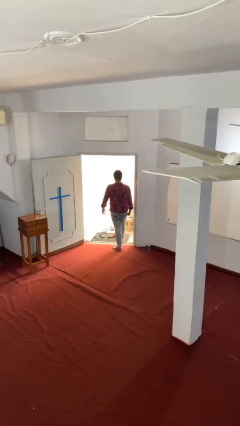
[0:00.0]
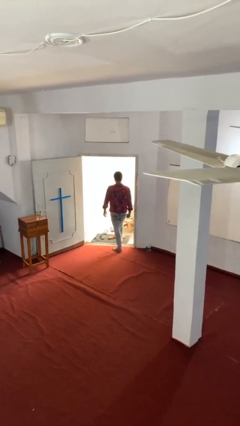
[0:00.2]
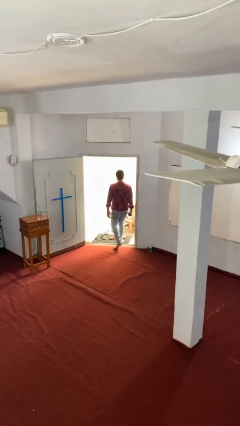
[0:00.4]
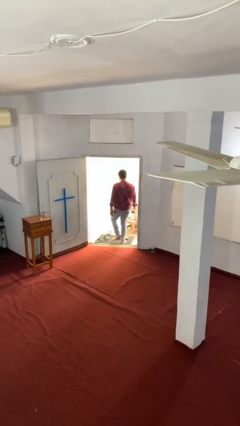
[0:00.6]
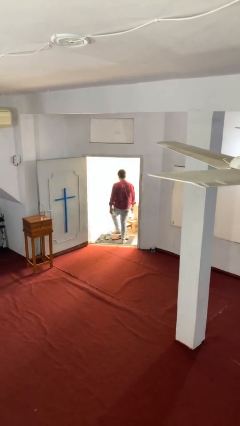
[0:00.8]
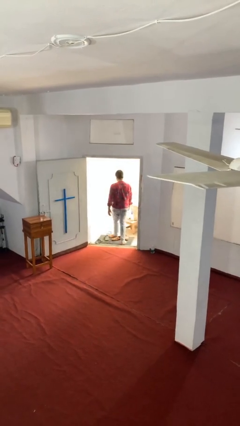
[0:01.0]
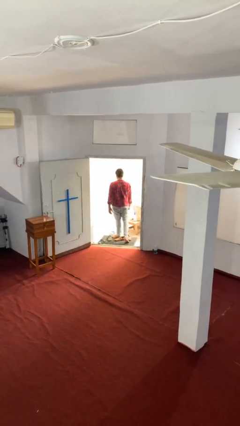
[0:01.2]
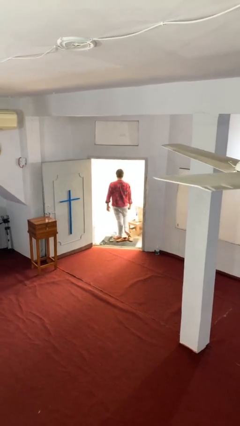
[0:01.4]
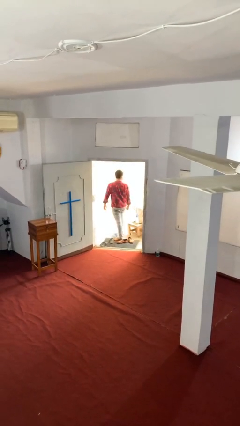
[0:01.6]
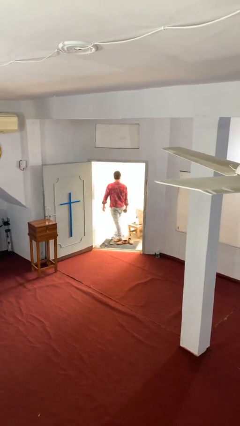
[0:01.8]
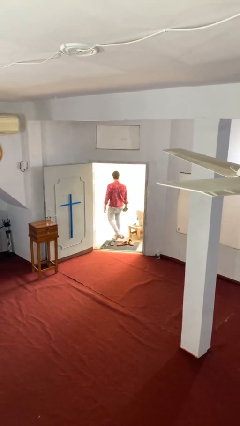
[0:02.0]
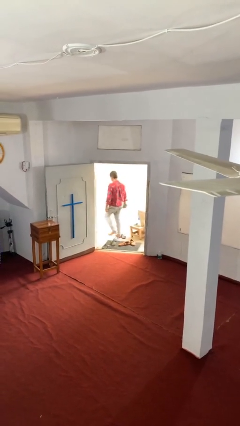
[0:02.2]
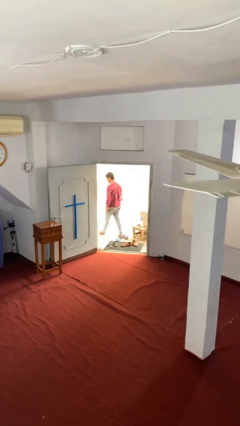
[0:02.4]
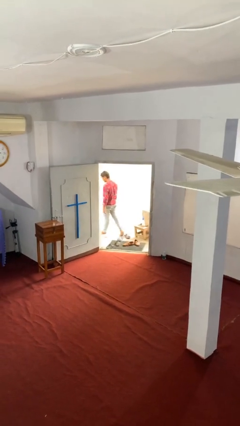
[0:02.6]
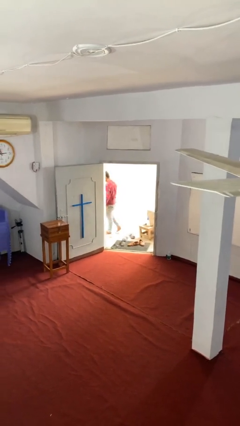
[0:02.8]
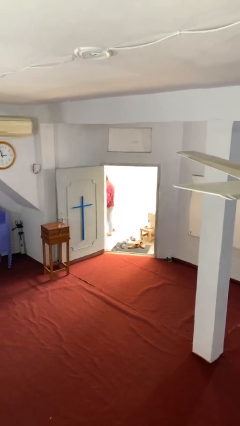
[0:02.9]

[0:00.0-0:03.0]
person exits scene through structure

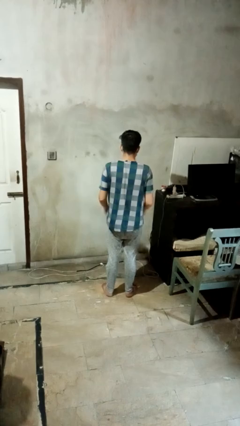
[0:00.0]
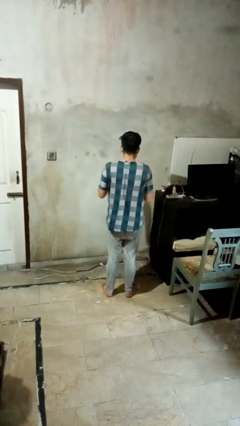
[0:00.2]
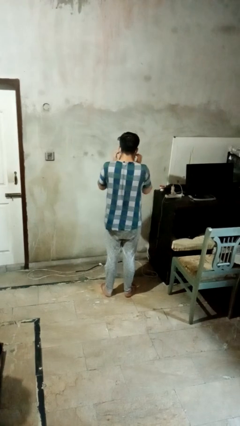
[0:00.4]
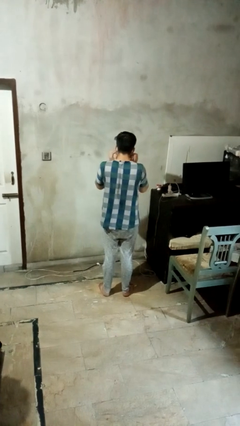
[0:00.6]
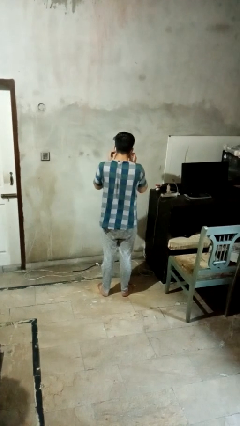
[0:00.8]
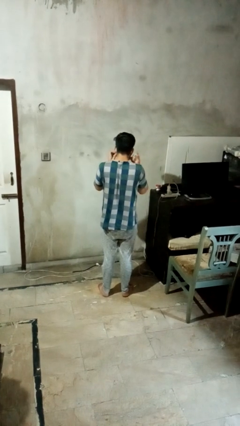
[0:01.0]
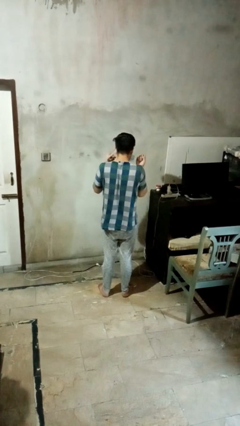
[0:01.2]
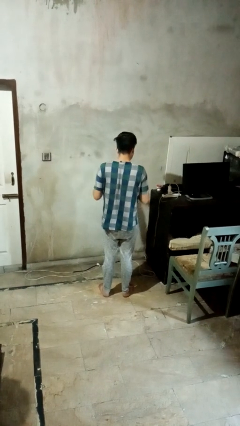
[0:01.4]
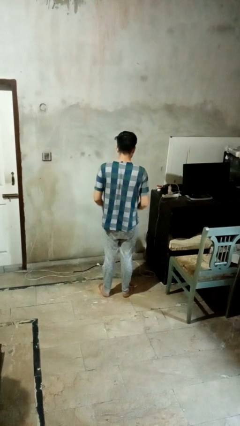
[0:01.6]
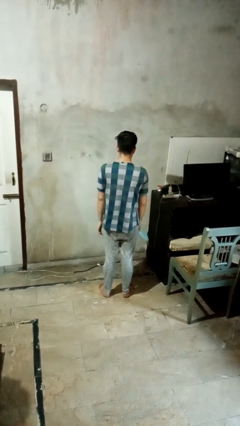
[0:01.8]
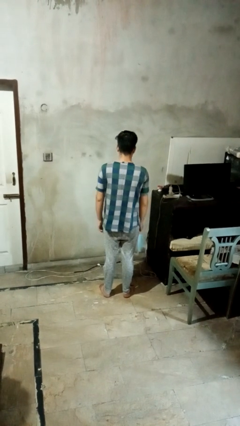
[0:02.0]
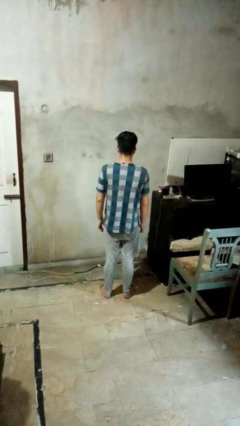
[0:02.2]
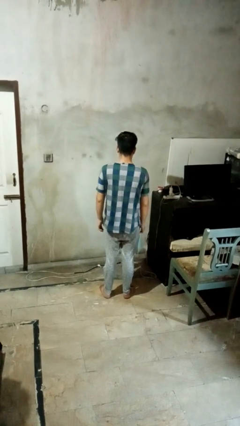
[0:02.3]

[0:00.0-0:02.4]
person takes off facemask

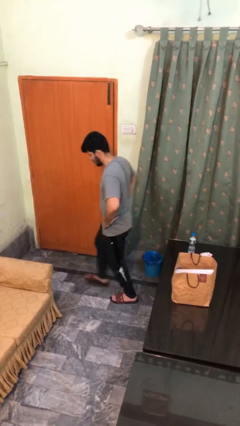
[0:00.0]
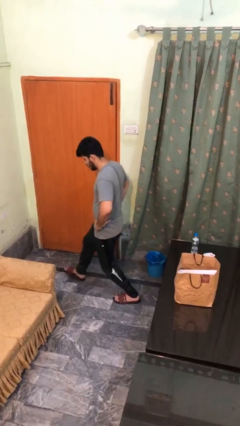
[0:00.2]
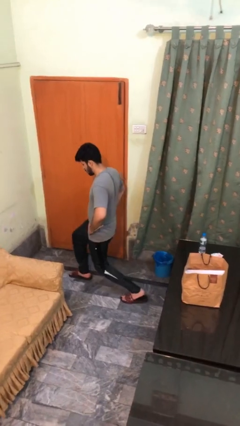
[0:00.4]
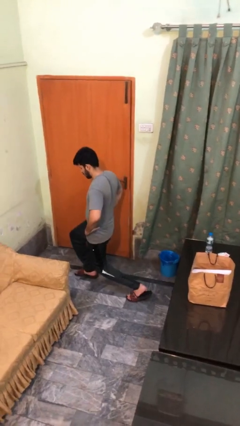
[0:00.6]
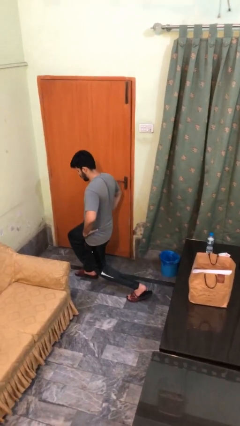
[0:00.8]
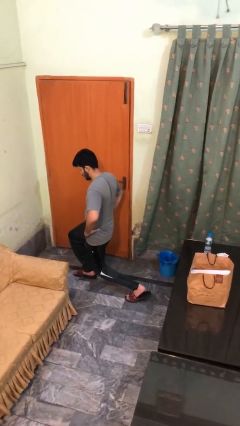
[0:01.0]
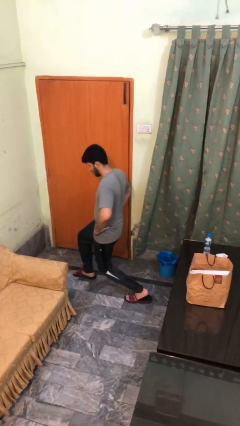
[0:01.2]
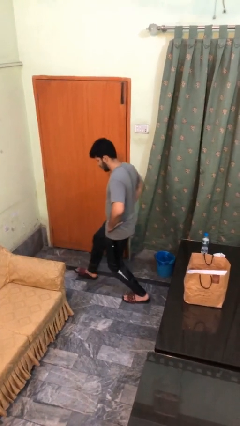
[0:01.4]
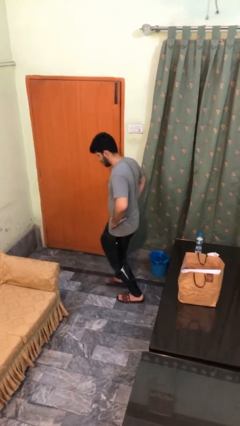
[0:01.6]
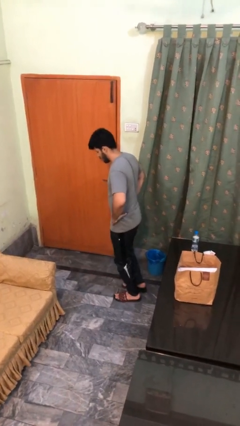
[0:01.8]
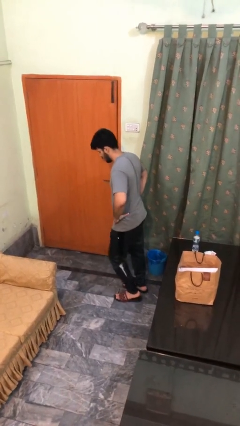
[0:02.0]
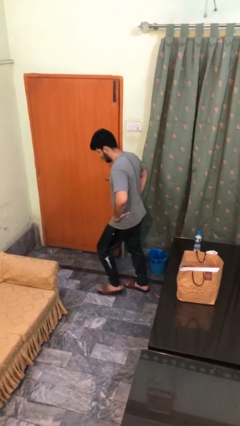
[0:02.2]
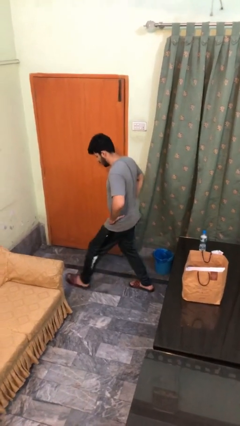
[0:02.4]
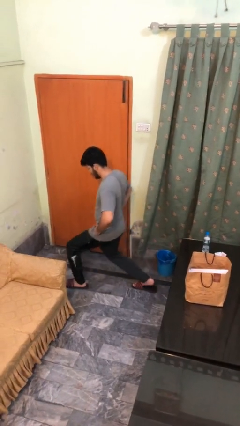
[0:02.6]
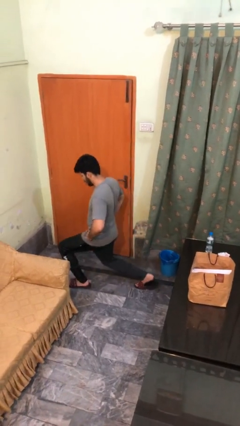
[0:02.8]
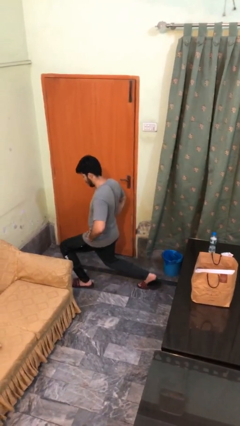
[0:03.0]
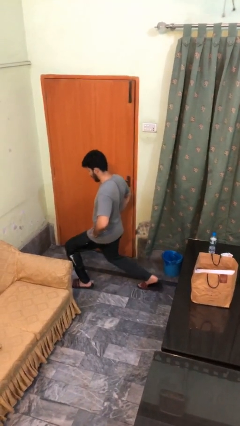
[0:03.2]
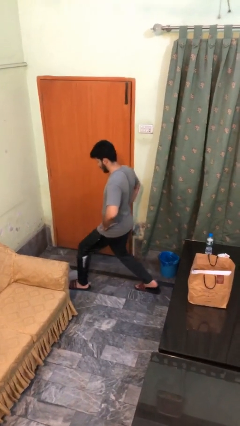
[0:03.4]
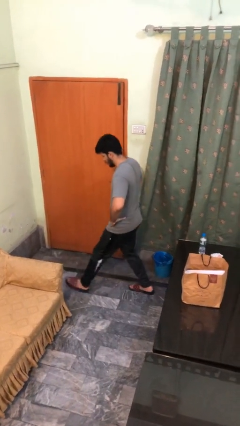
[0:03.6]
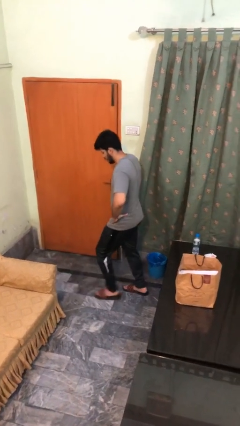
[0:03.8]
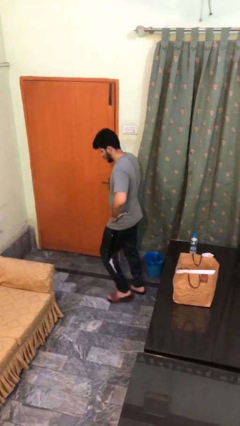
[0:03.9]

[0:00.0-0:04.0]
person exercises with lunges

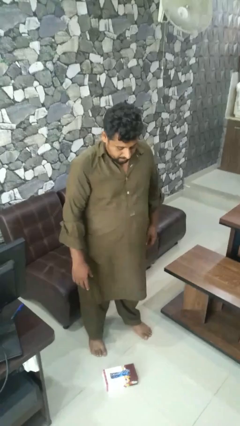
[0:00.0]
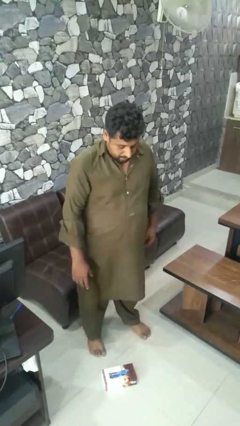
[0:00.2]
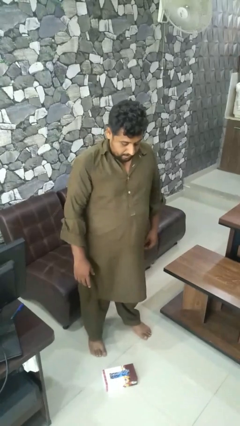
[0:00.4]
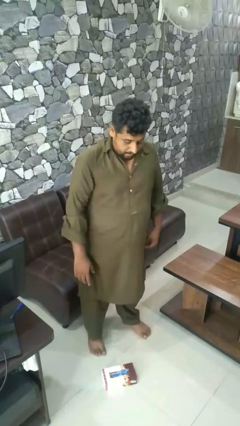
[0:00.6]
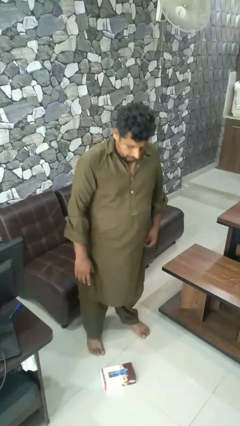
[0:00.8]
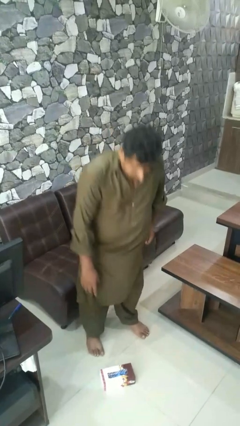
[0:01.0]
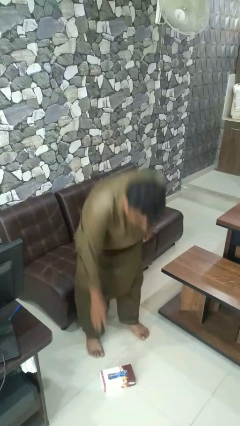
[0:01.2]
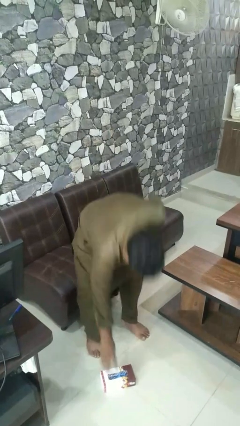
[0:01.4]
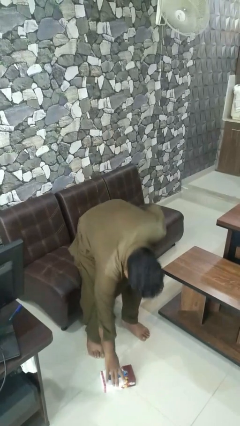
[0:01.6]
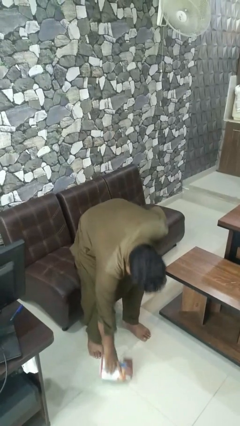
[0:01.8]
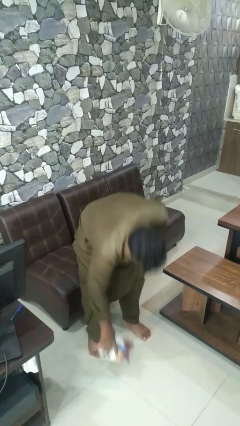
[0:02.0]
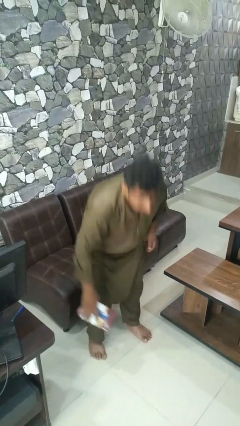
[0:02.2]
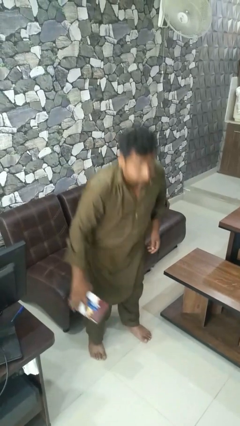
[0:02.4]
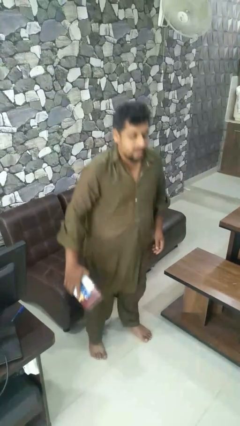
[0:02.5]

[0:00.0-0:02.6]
person picks up object from floor

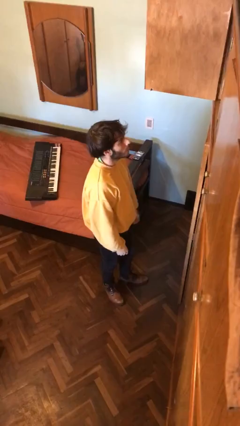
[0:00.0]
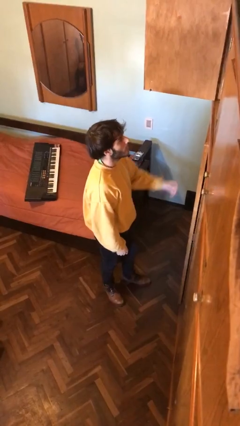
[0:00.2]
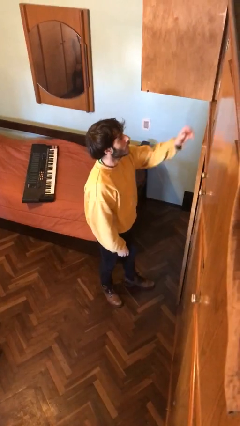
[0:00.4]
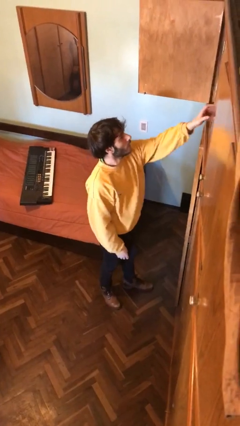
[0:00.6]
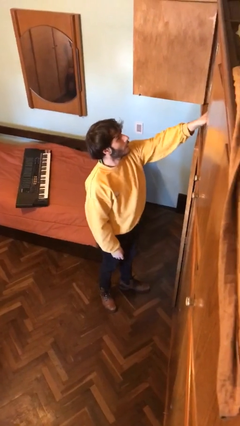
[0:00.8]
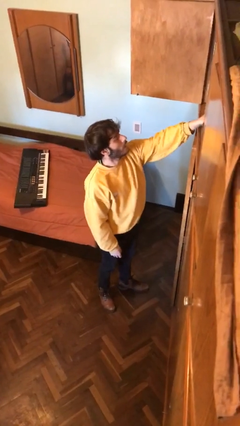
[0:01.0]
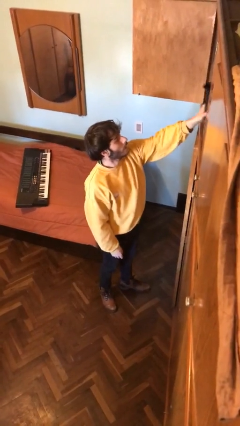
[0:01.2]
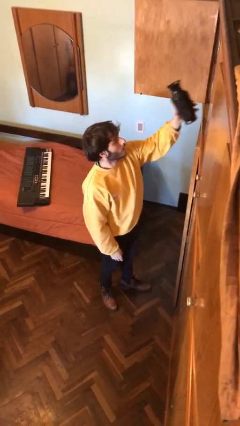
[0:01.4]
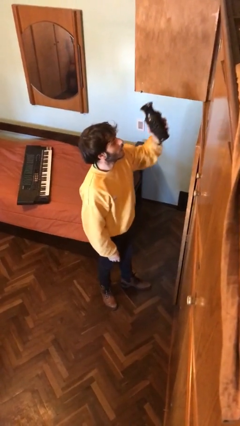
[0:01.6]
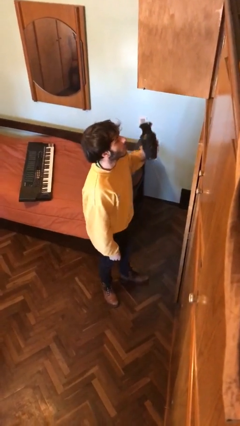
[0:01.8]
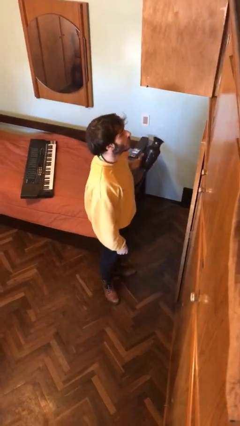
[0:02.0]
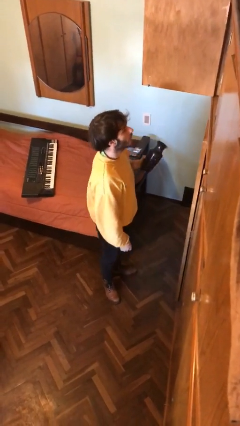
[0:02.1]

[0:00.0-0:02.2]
person picks up object from cabinet

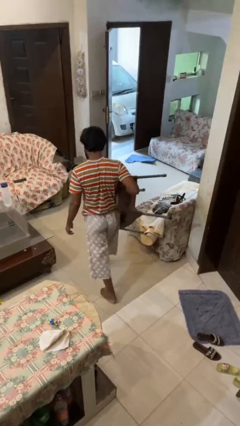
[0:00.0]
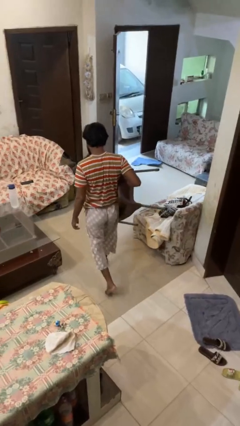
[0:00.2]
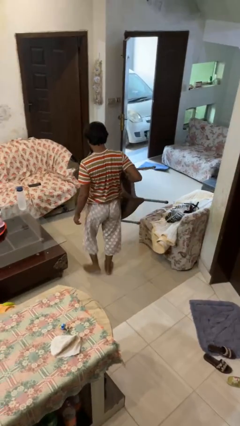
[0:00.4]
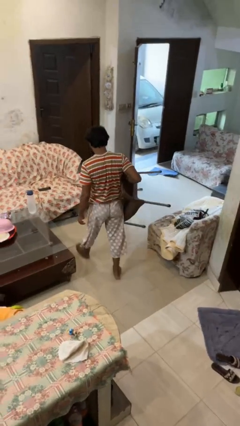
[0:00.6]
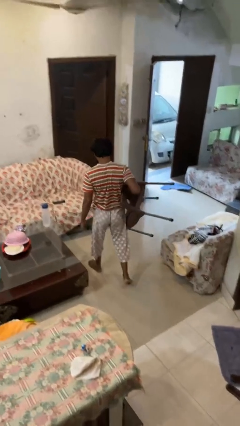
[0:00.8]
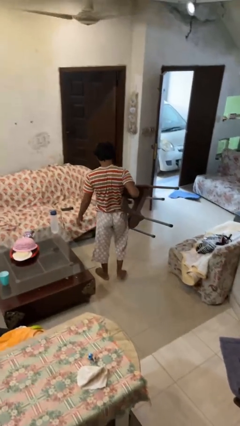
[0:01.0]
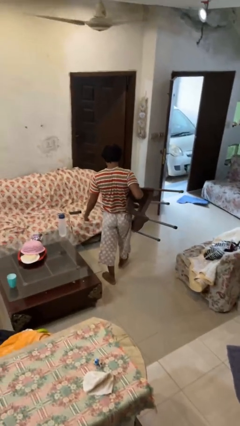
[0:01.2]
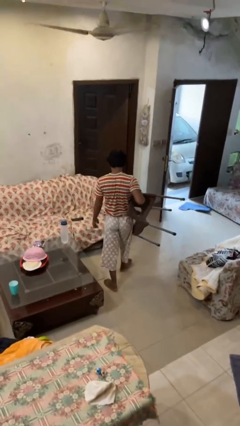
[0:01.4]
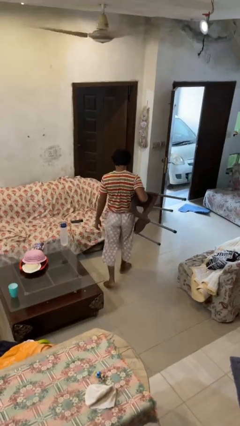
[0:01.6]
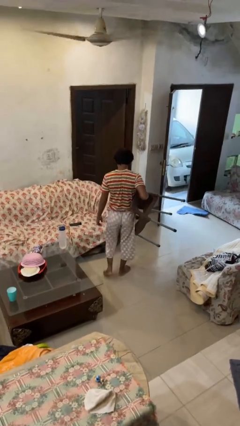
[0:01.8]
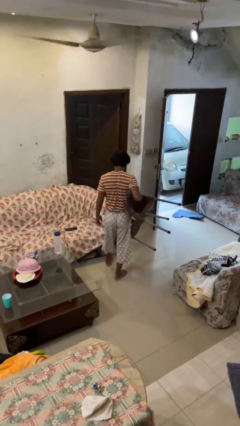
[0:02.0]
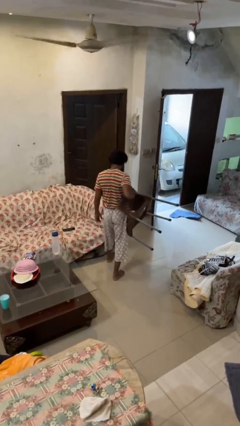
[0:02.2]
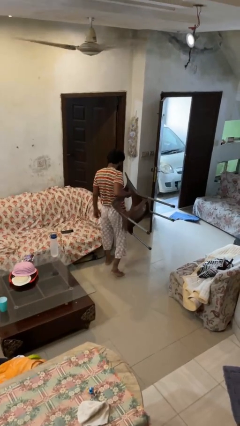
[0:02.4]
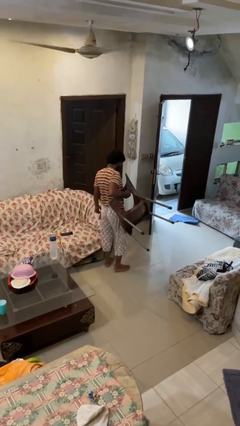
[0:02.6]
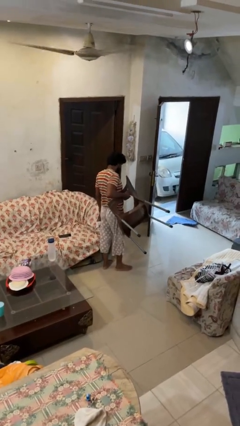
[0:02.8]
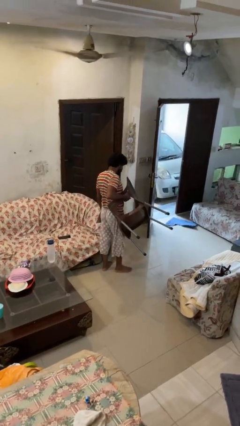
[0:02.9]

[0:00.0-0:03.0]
person carries furniture

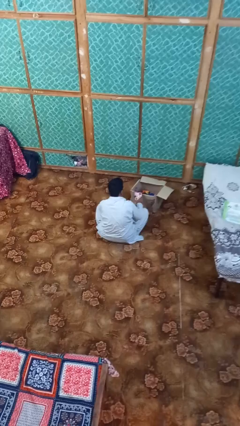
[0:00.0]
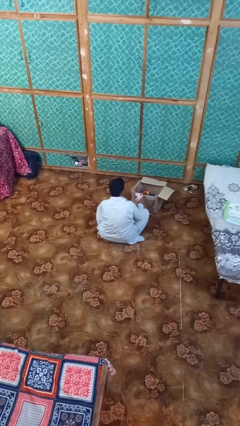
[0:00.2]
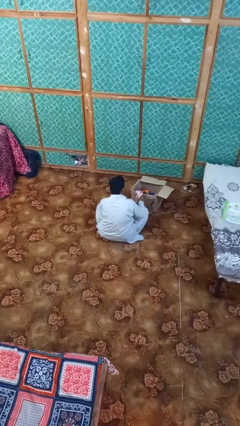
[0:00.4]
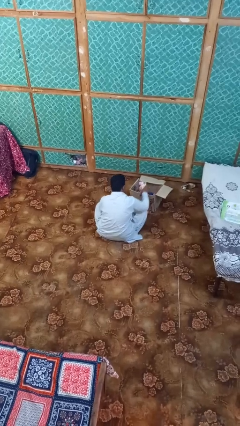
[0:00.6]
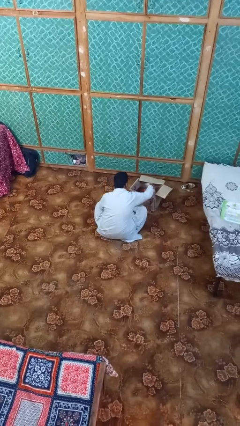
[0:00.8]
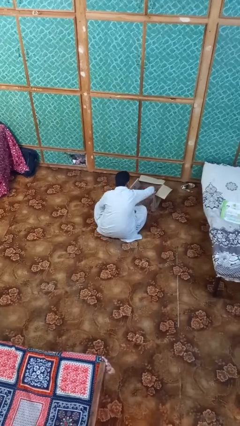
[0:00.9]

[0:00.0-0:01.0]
person puts object into box
